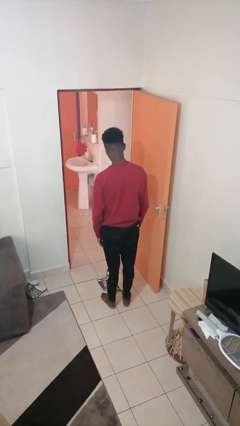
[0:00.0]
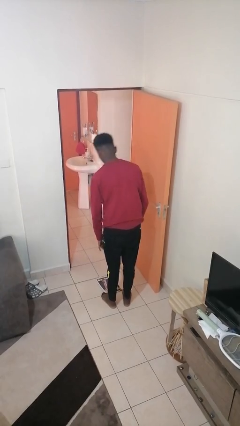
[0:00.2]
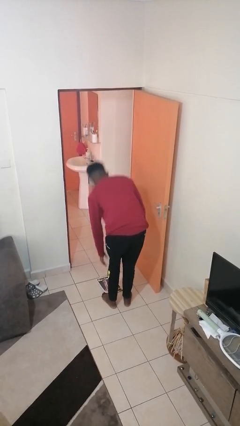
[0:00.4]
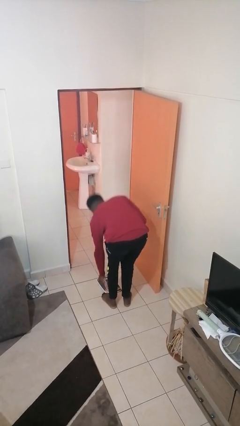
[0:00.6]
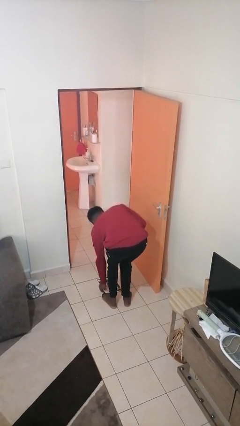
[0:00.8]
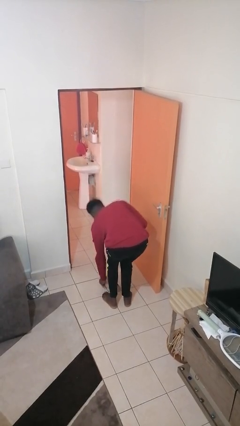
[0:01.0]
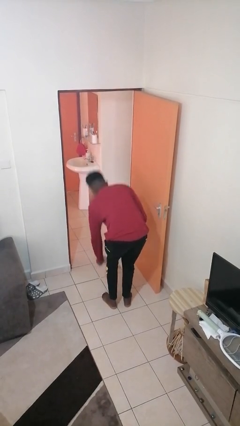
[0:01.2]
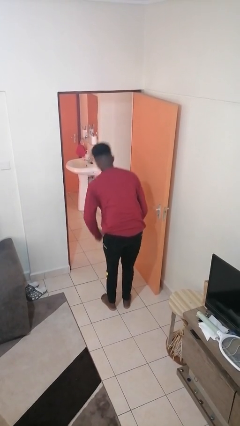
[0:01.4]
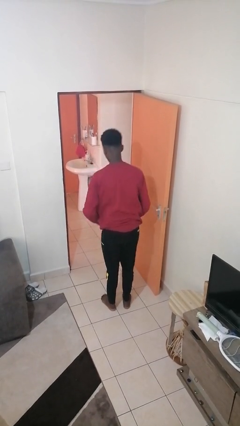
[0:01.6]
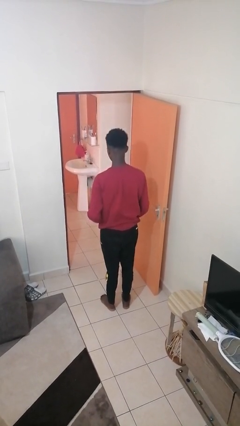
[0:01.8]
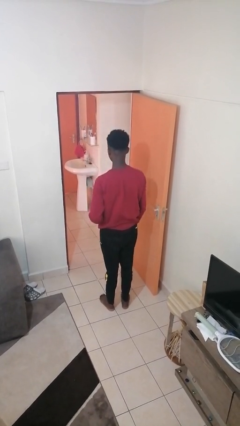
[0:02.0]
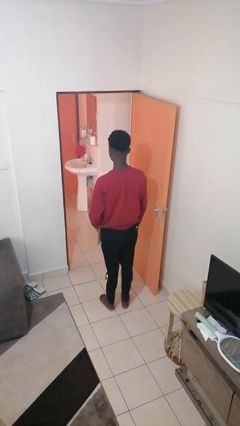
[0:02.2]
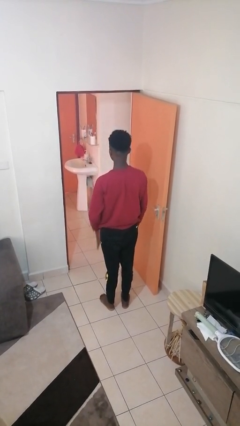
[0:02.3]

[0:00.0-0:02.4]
person picks up object from floor

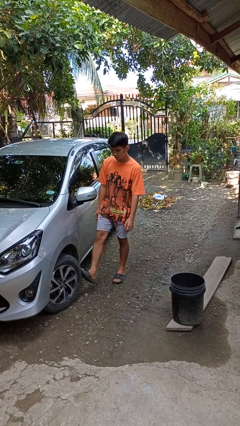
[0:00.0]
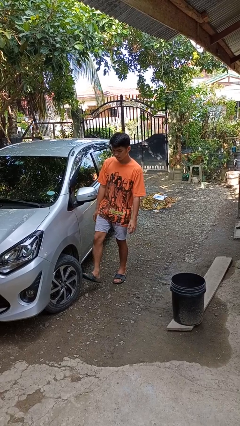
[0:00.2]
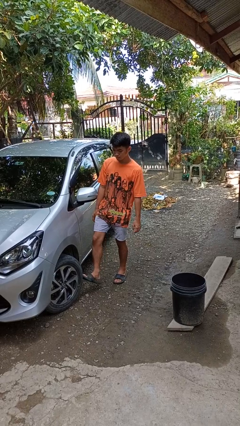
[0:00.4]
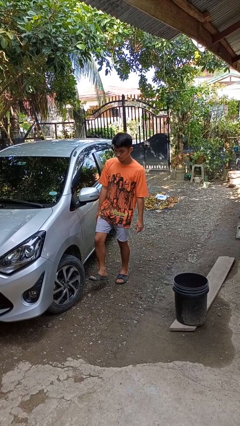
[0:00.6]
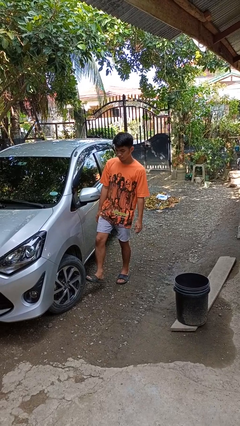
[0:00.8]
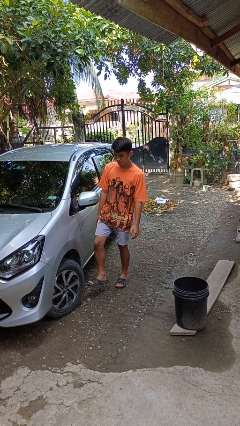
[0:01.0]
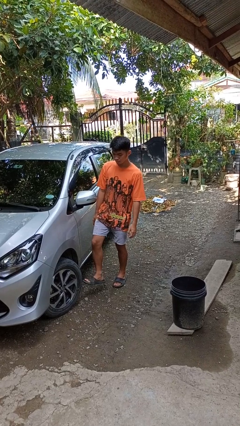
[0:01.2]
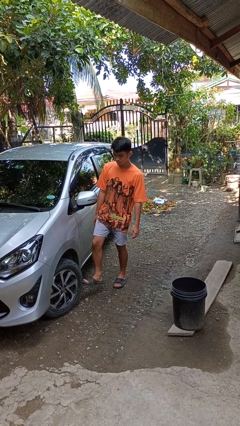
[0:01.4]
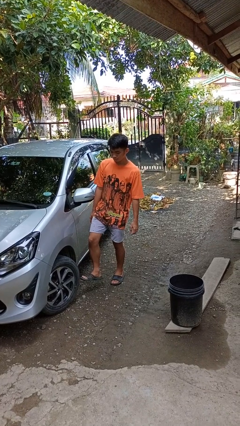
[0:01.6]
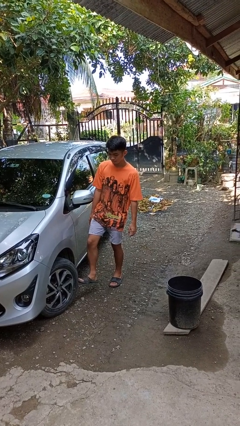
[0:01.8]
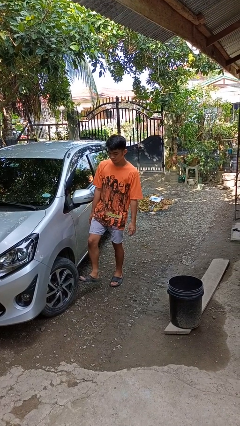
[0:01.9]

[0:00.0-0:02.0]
person kicks car tires

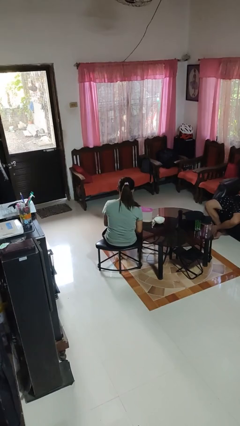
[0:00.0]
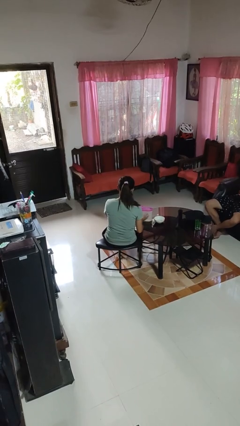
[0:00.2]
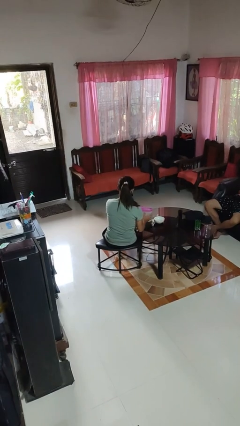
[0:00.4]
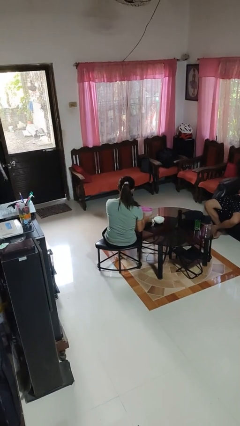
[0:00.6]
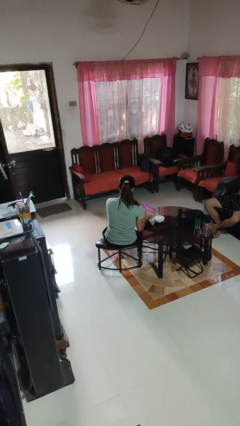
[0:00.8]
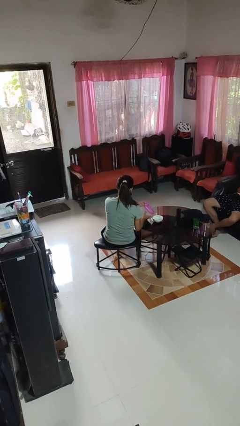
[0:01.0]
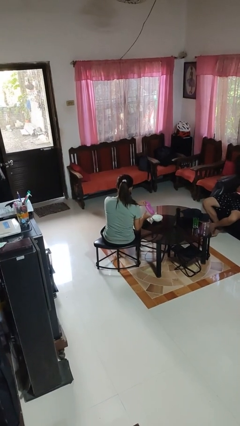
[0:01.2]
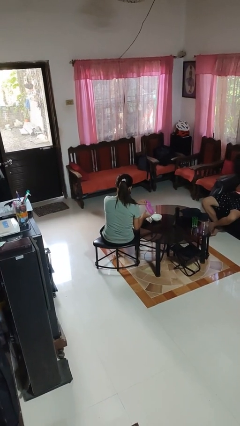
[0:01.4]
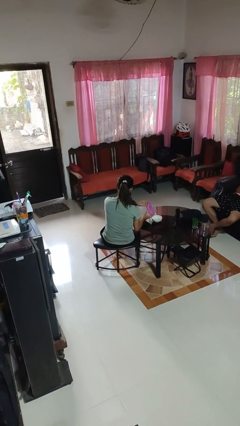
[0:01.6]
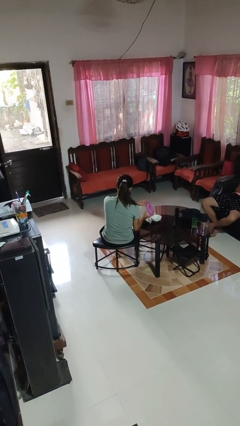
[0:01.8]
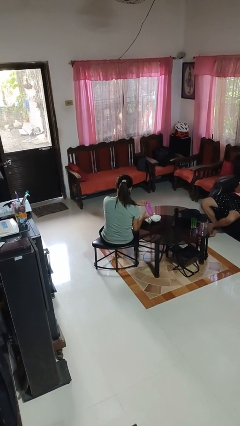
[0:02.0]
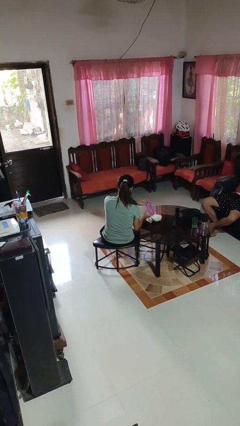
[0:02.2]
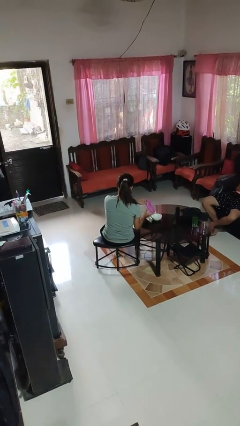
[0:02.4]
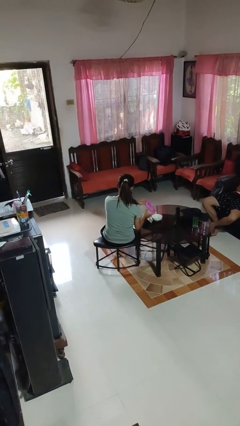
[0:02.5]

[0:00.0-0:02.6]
person pours into bowl

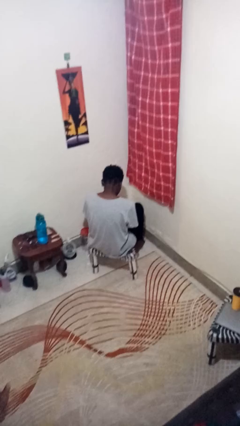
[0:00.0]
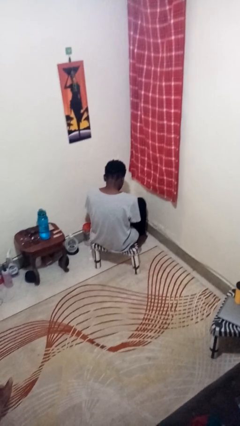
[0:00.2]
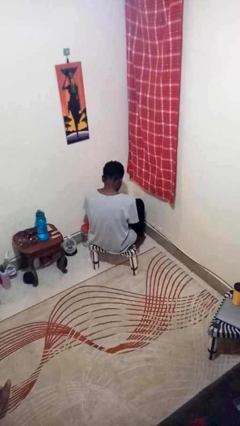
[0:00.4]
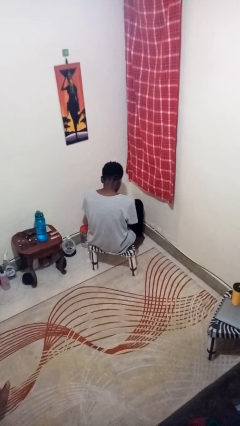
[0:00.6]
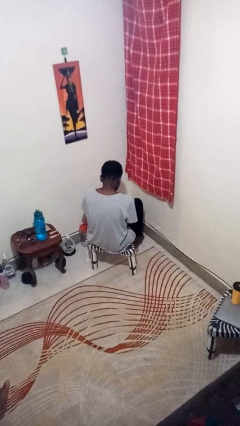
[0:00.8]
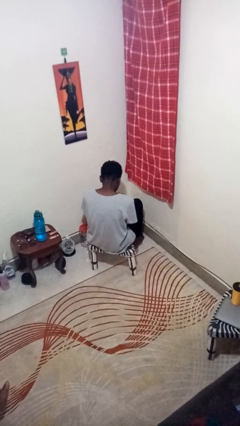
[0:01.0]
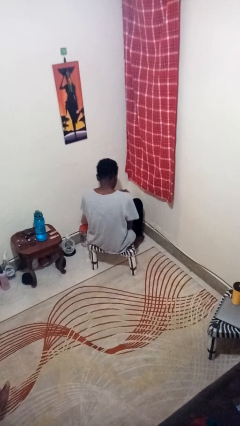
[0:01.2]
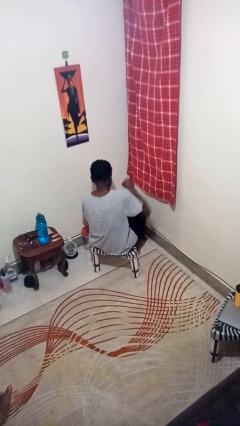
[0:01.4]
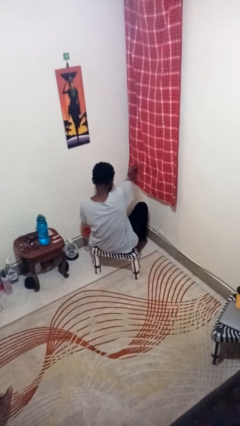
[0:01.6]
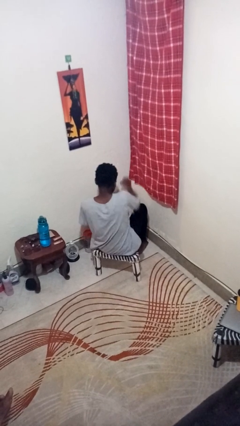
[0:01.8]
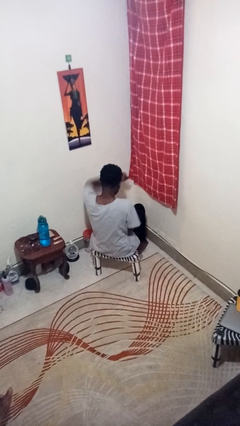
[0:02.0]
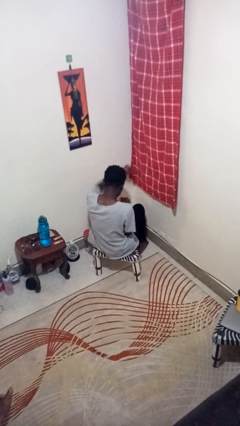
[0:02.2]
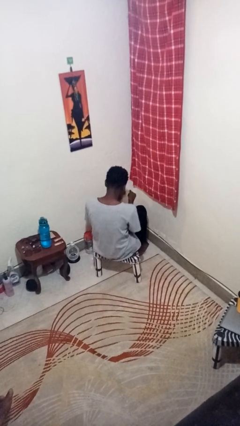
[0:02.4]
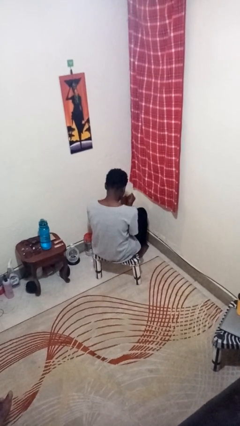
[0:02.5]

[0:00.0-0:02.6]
person punches

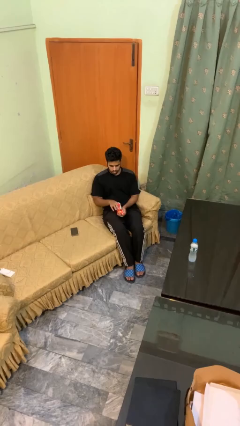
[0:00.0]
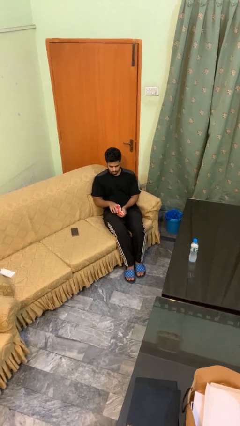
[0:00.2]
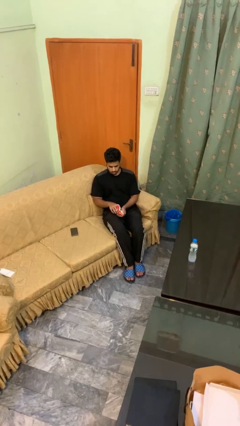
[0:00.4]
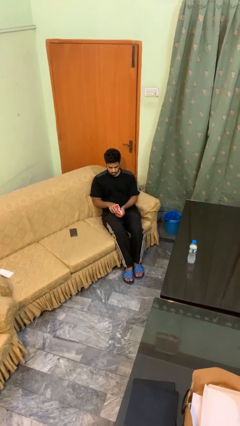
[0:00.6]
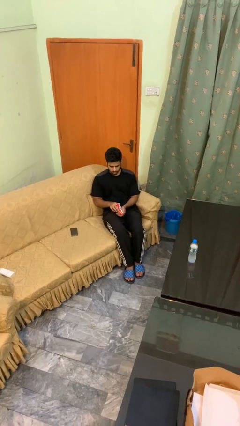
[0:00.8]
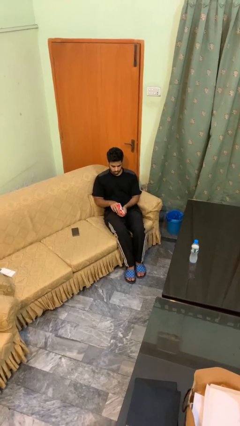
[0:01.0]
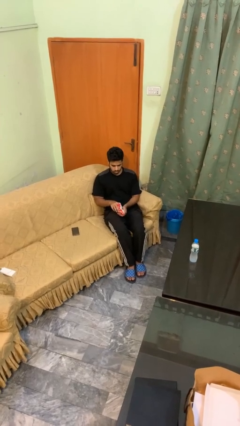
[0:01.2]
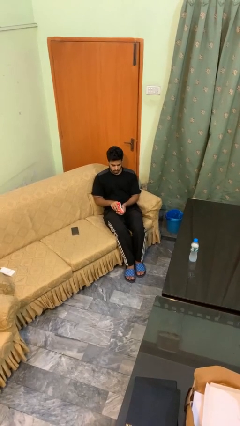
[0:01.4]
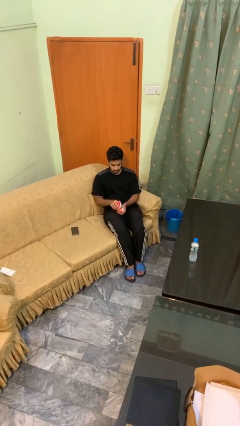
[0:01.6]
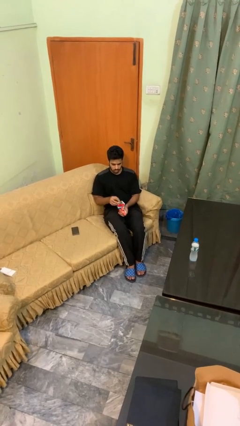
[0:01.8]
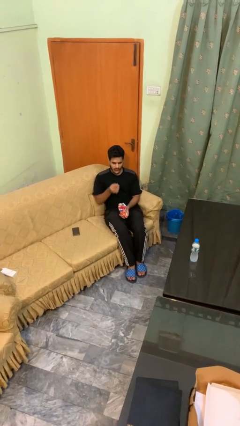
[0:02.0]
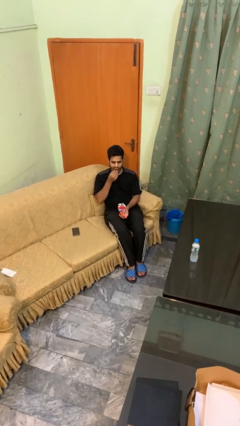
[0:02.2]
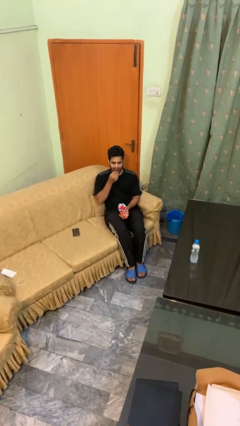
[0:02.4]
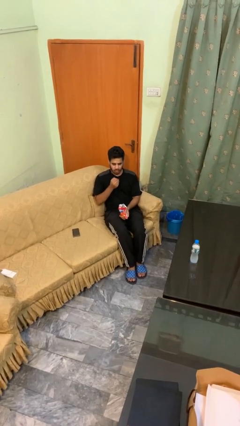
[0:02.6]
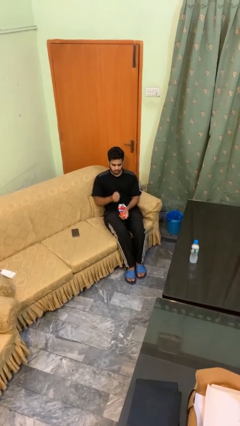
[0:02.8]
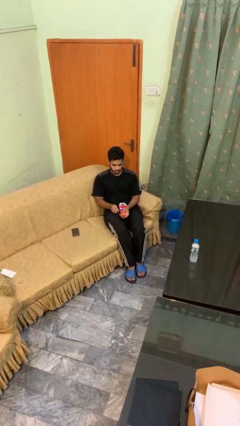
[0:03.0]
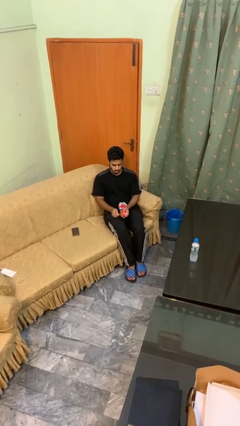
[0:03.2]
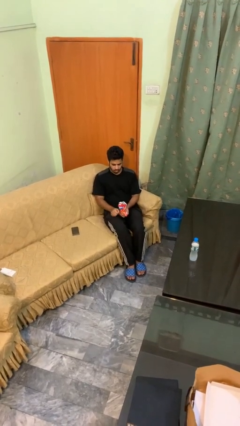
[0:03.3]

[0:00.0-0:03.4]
person eats snack from bag

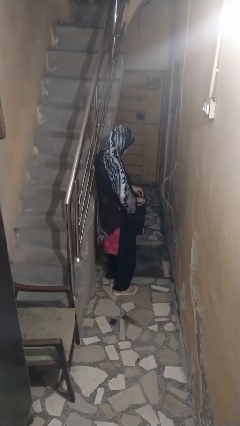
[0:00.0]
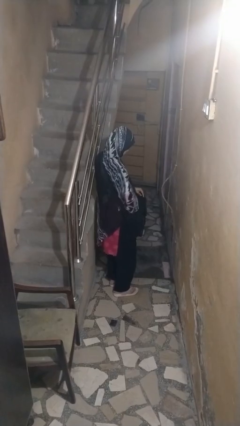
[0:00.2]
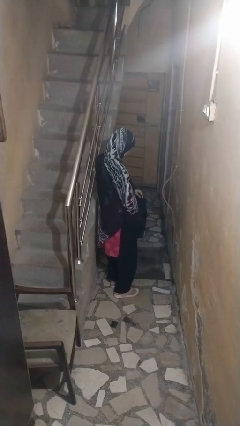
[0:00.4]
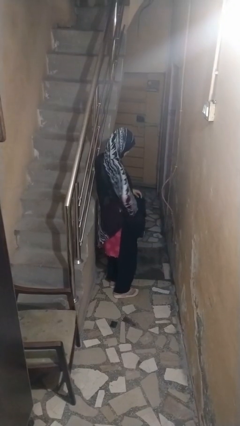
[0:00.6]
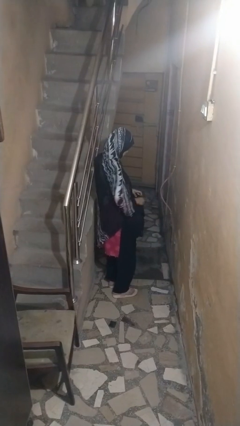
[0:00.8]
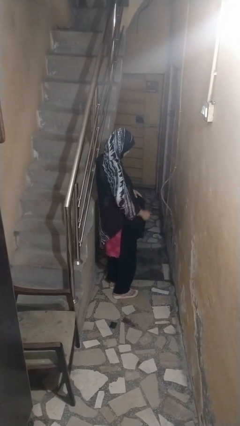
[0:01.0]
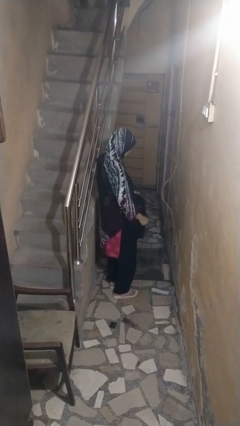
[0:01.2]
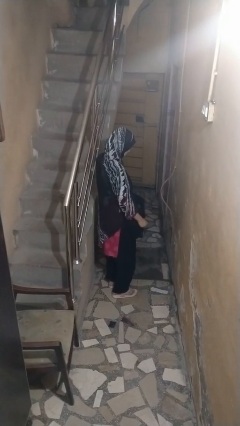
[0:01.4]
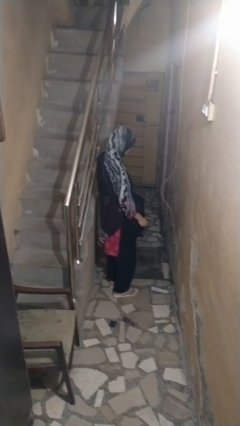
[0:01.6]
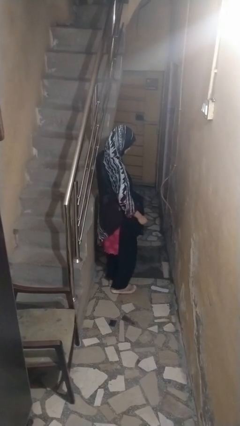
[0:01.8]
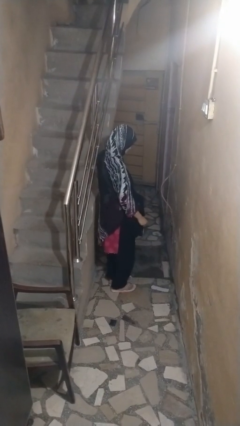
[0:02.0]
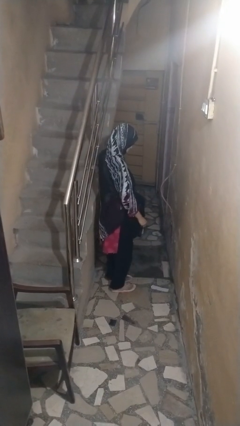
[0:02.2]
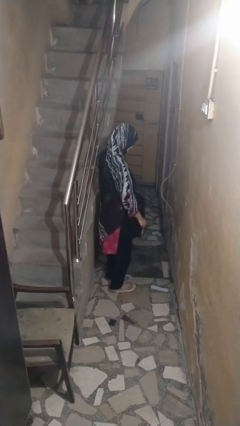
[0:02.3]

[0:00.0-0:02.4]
person puts object into backpack

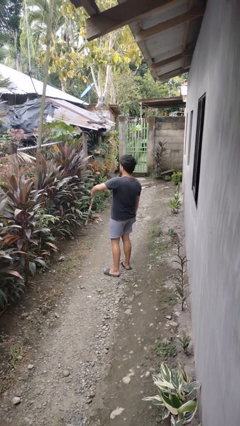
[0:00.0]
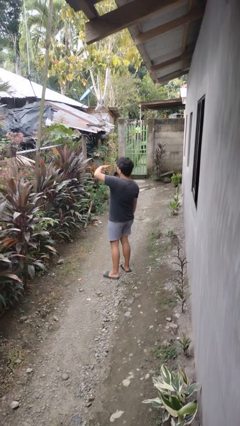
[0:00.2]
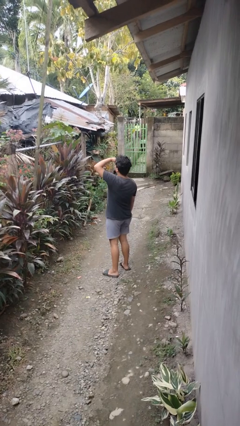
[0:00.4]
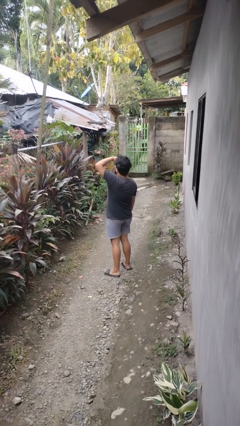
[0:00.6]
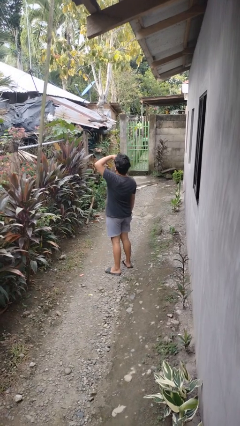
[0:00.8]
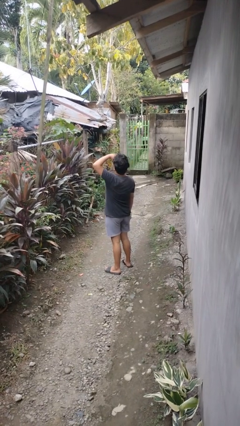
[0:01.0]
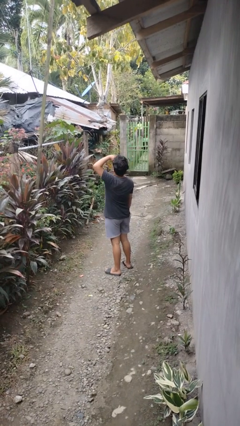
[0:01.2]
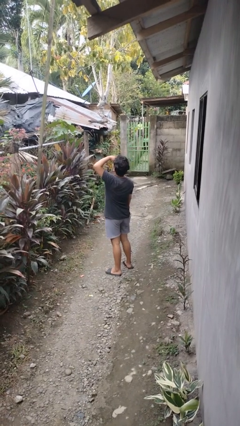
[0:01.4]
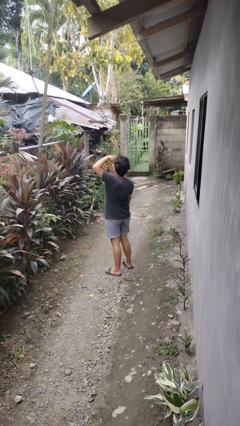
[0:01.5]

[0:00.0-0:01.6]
person shades eyes
